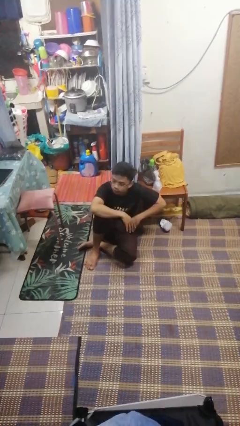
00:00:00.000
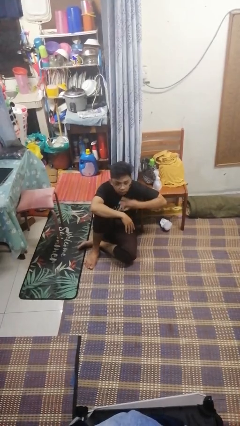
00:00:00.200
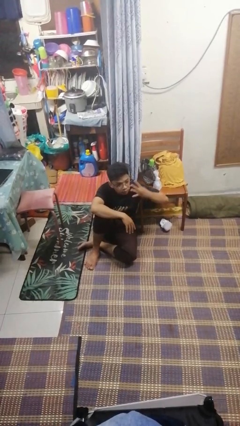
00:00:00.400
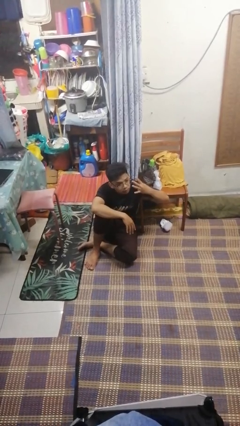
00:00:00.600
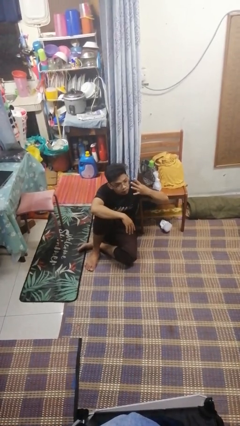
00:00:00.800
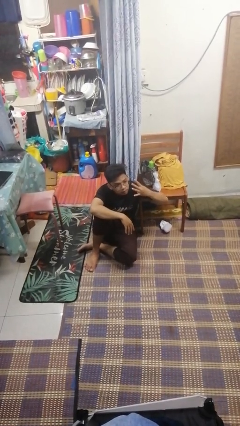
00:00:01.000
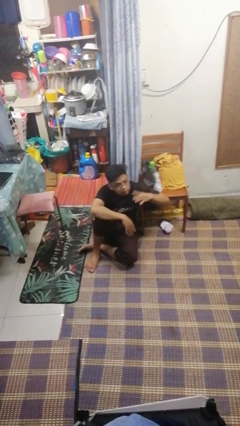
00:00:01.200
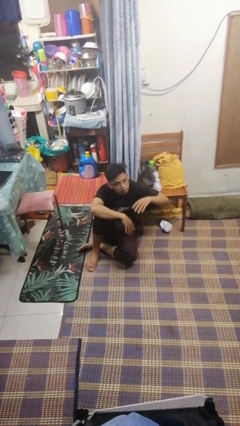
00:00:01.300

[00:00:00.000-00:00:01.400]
person gestures number four

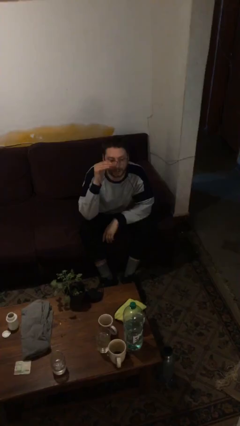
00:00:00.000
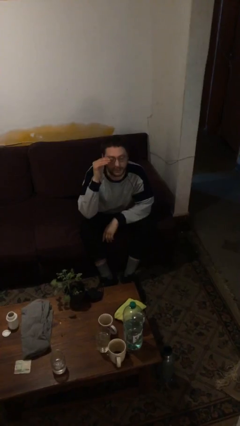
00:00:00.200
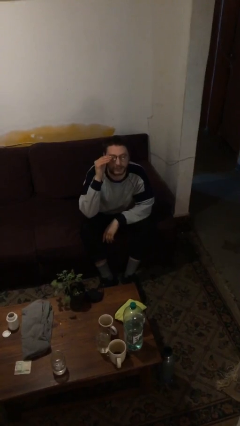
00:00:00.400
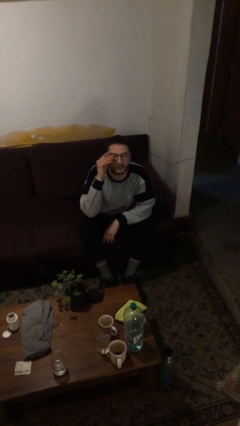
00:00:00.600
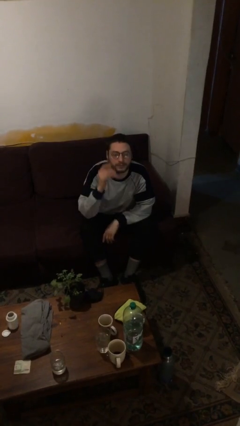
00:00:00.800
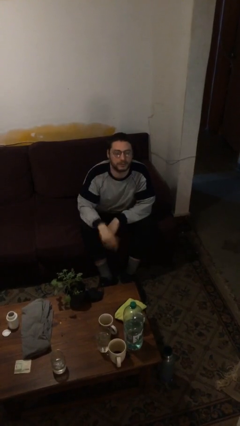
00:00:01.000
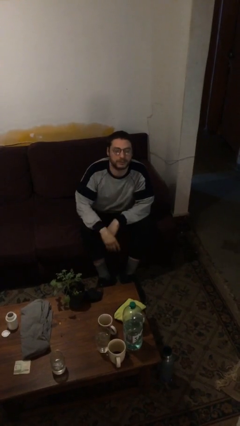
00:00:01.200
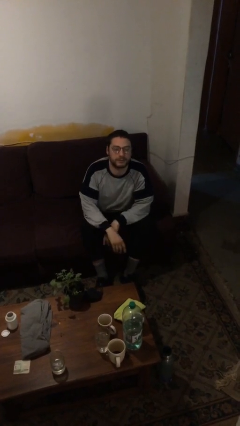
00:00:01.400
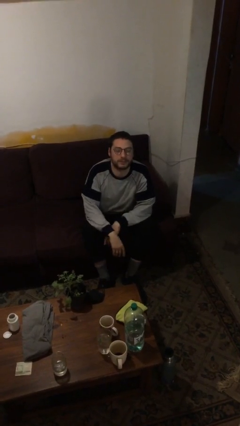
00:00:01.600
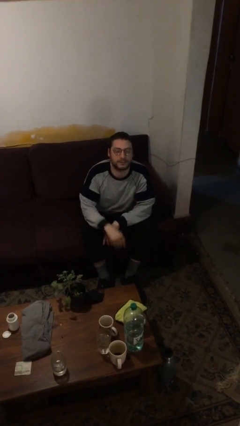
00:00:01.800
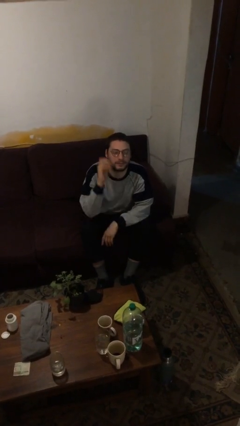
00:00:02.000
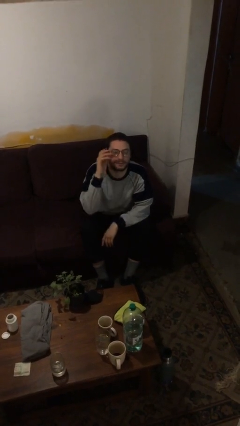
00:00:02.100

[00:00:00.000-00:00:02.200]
person puts on glasses

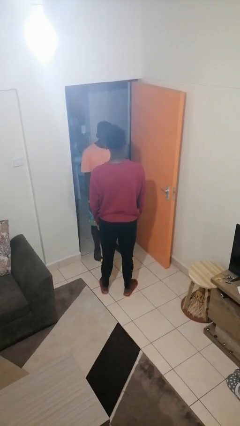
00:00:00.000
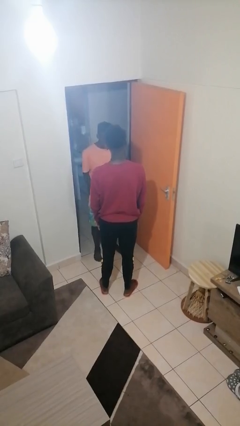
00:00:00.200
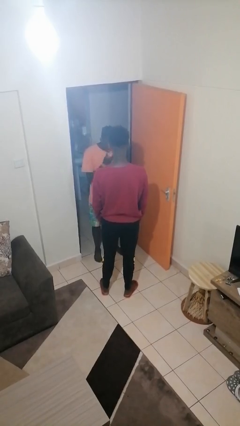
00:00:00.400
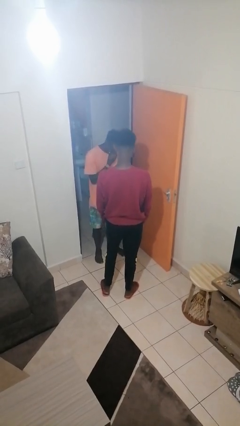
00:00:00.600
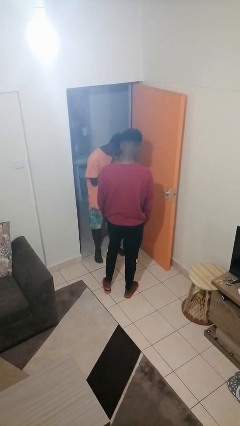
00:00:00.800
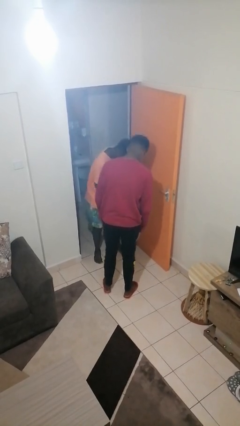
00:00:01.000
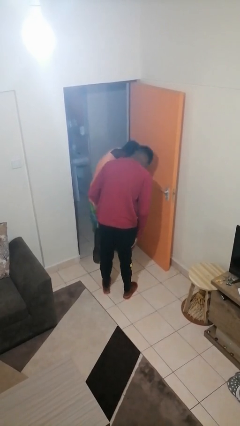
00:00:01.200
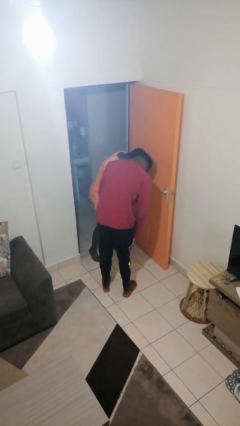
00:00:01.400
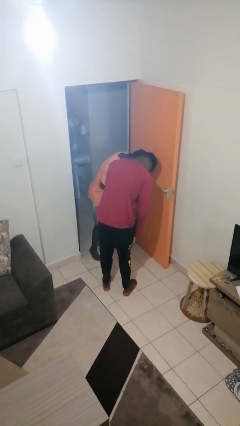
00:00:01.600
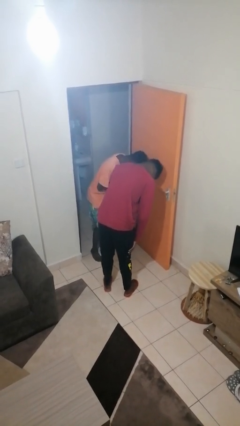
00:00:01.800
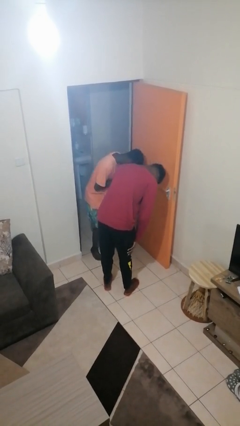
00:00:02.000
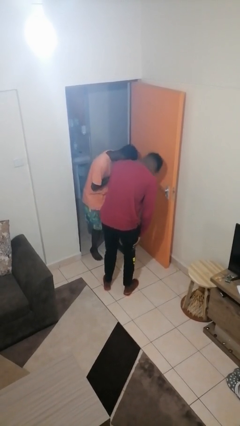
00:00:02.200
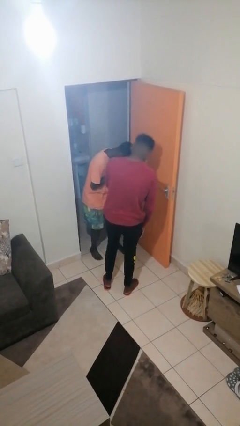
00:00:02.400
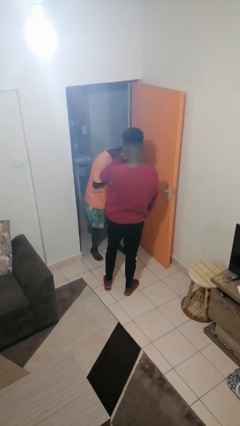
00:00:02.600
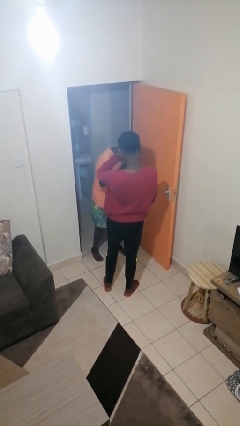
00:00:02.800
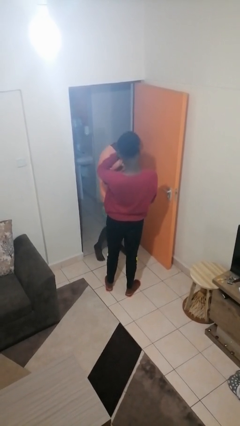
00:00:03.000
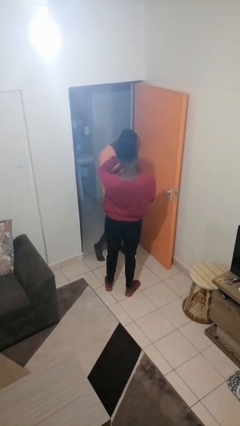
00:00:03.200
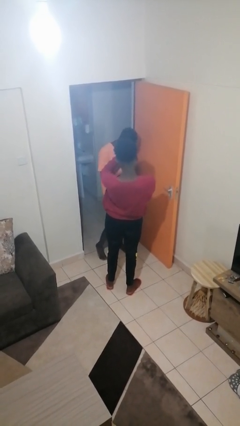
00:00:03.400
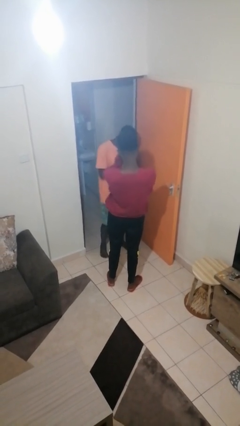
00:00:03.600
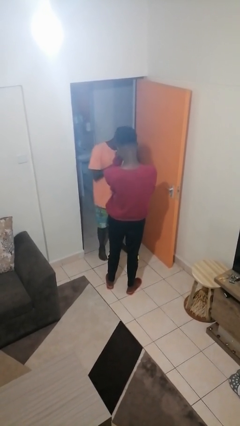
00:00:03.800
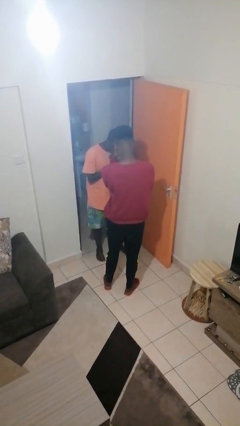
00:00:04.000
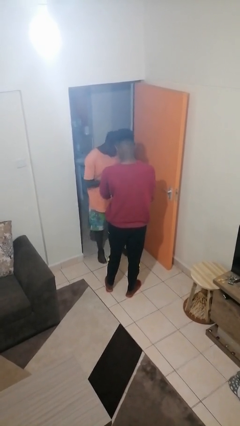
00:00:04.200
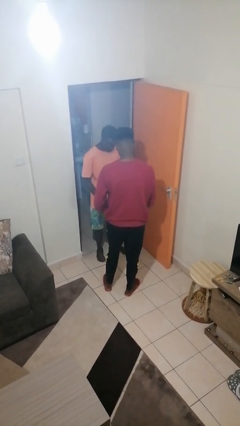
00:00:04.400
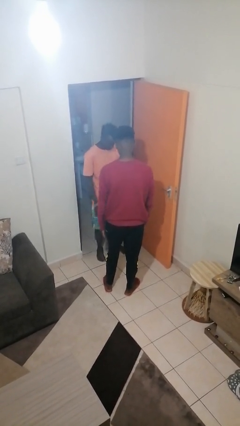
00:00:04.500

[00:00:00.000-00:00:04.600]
person laughs with person

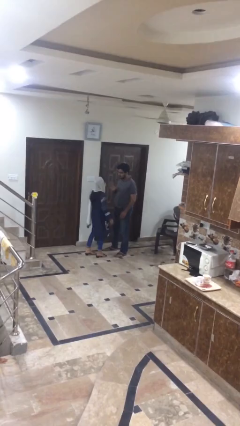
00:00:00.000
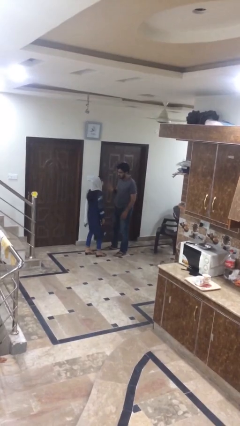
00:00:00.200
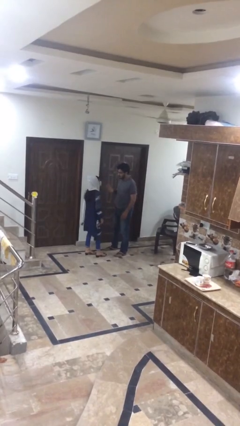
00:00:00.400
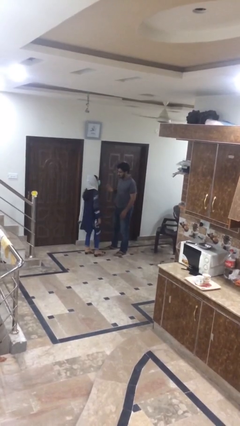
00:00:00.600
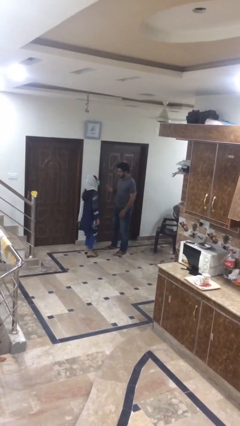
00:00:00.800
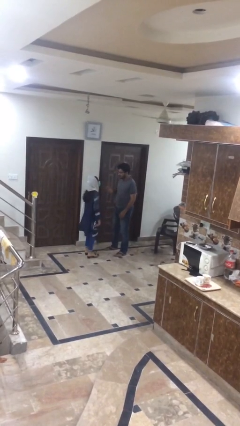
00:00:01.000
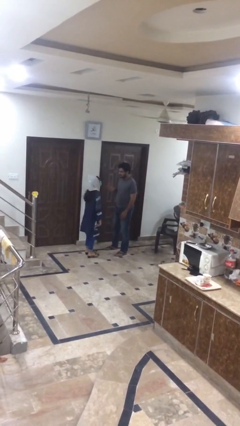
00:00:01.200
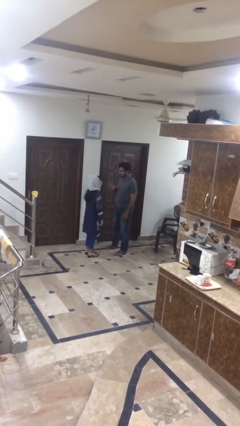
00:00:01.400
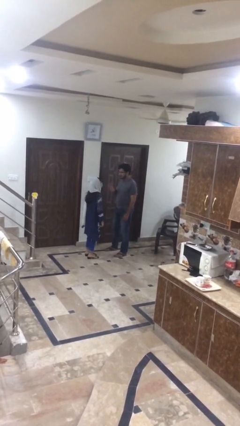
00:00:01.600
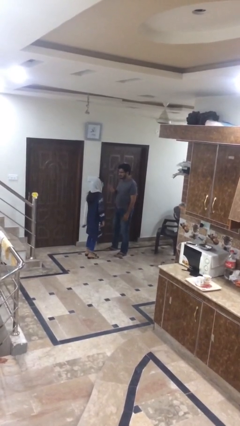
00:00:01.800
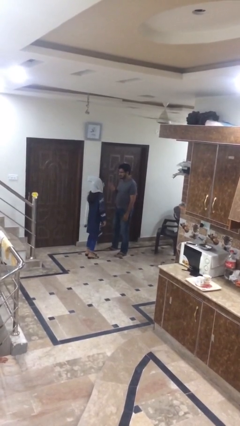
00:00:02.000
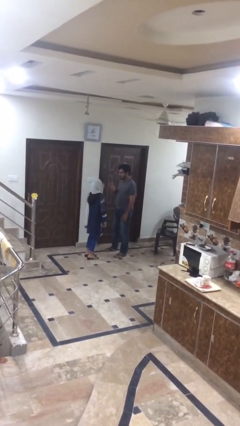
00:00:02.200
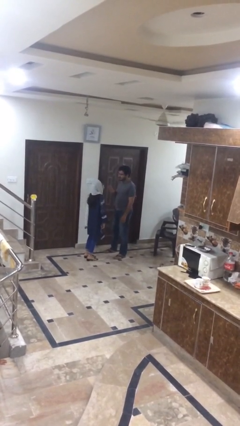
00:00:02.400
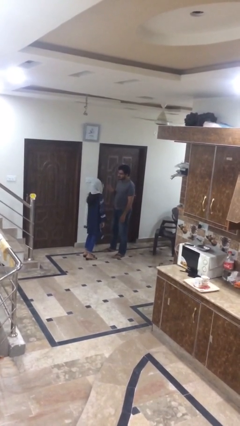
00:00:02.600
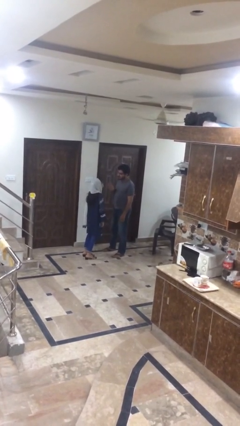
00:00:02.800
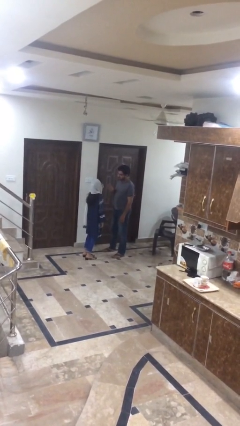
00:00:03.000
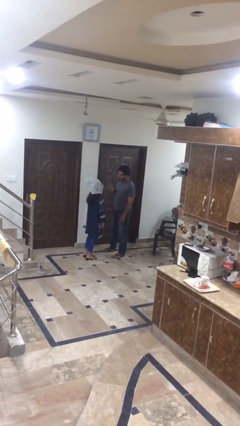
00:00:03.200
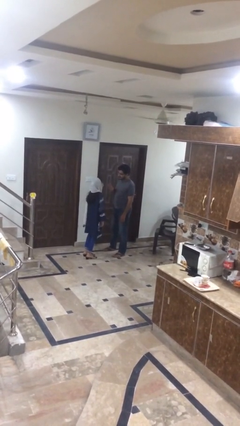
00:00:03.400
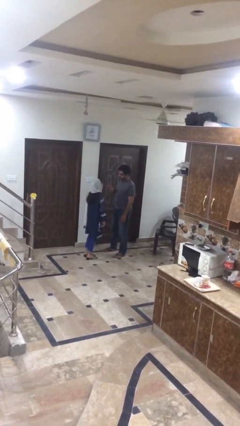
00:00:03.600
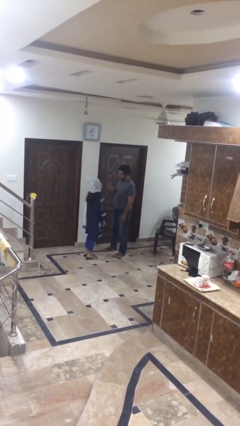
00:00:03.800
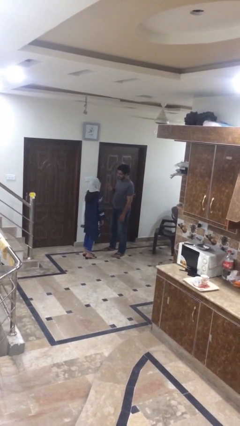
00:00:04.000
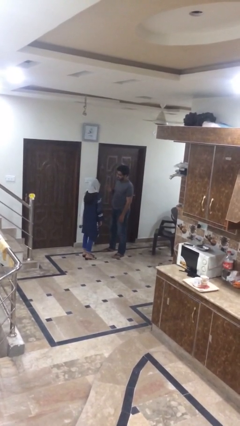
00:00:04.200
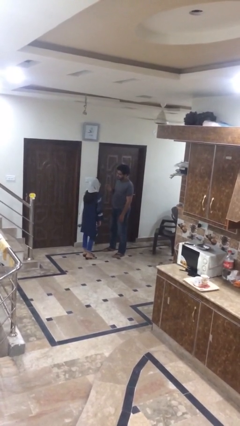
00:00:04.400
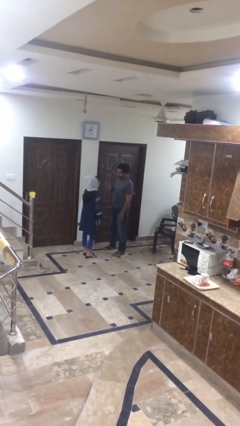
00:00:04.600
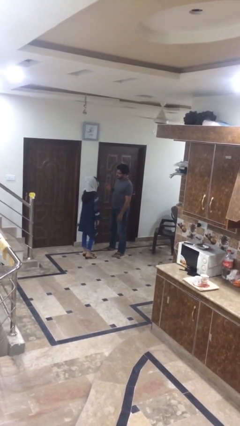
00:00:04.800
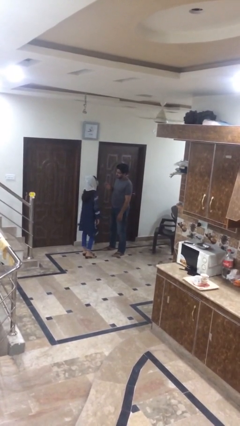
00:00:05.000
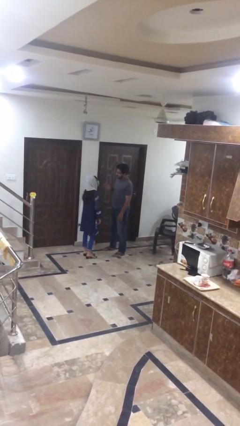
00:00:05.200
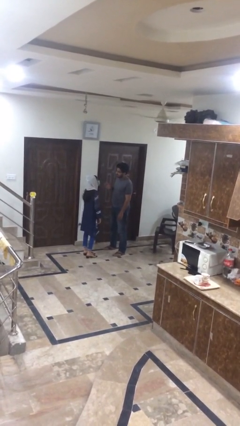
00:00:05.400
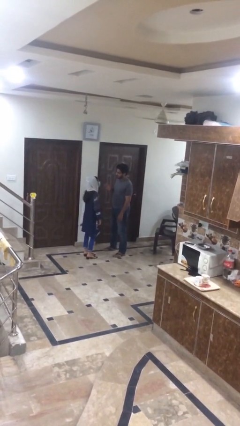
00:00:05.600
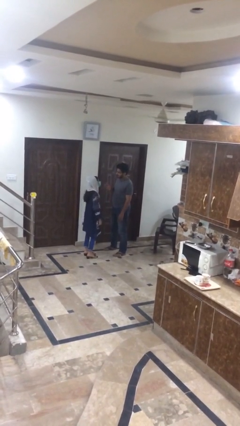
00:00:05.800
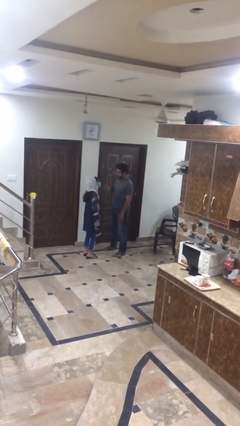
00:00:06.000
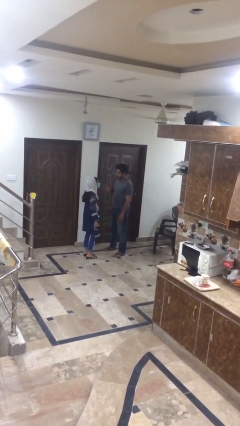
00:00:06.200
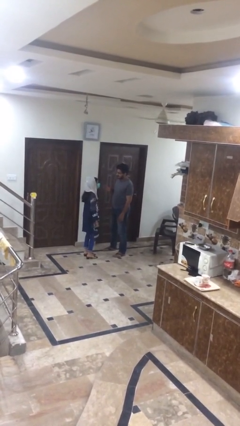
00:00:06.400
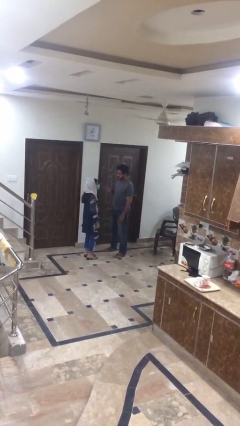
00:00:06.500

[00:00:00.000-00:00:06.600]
person talks to person

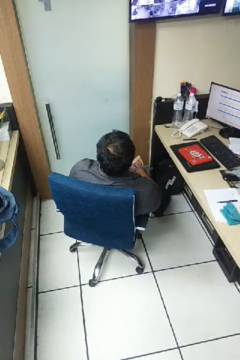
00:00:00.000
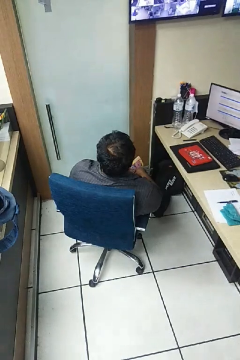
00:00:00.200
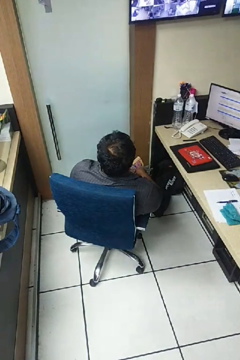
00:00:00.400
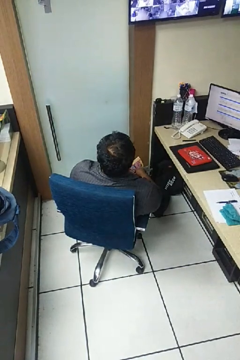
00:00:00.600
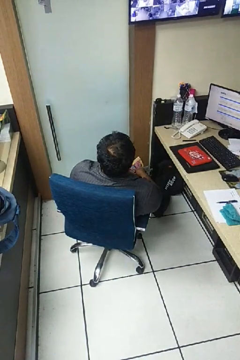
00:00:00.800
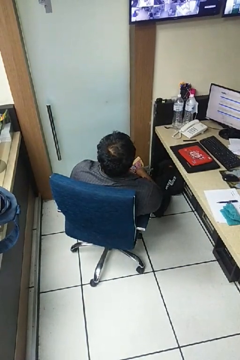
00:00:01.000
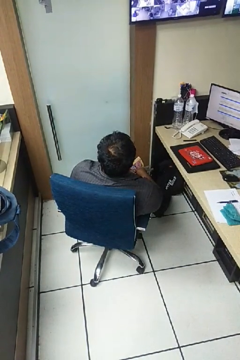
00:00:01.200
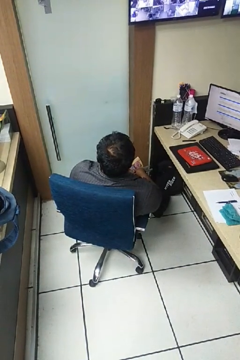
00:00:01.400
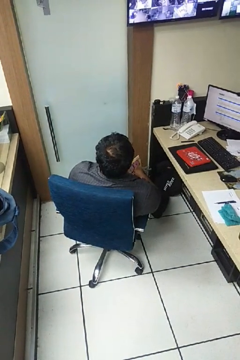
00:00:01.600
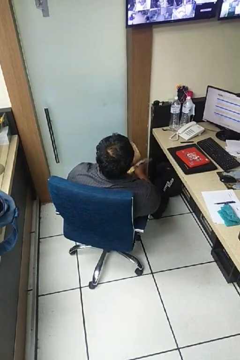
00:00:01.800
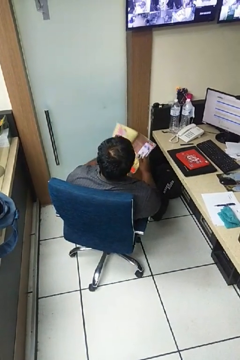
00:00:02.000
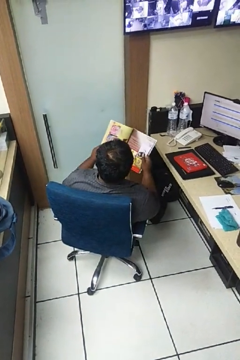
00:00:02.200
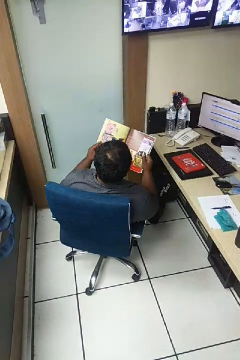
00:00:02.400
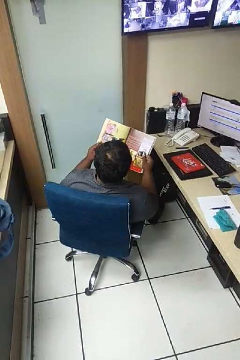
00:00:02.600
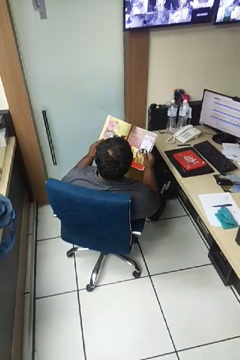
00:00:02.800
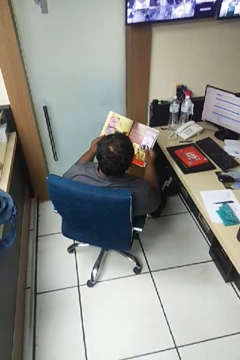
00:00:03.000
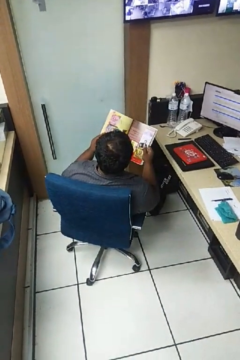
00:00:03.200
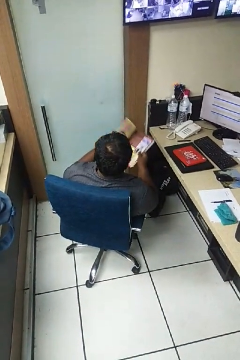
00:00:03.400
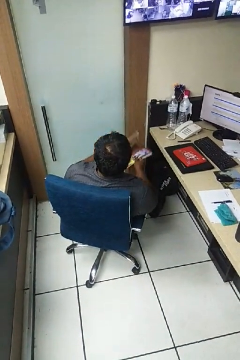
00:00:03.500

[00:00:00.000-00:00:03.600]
person reads magazine
